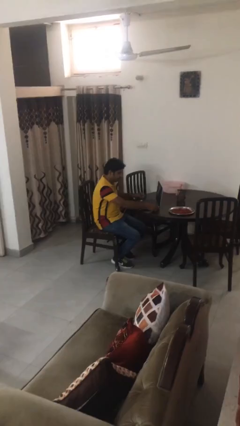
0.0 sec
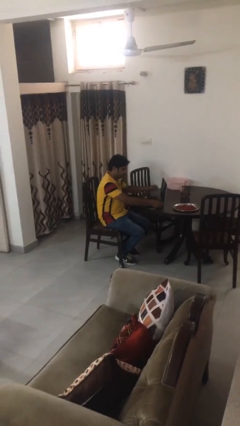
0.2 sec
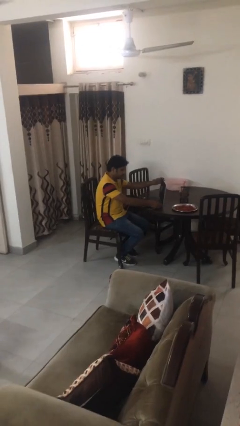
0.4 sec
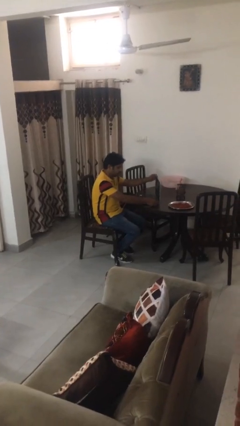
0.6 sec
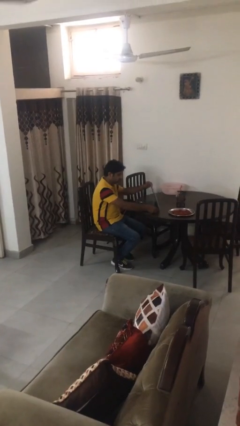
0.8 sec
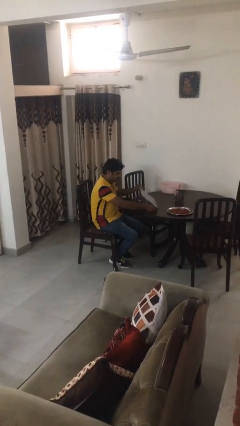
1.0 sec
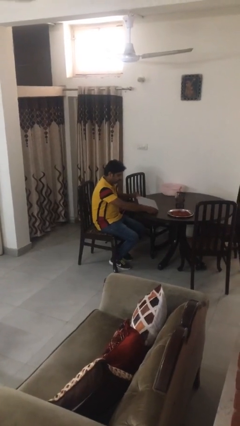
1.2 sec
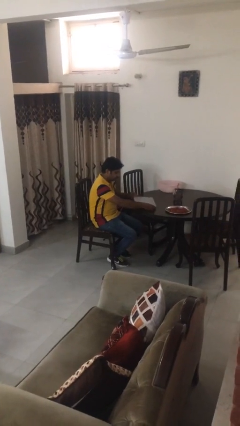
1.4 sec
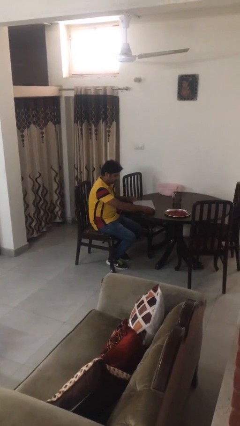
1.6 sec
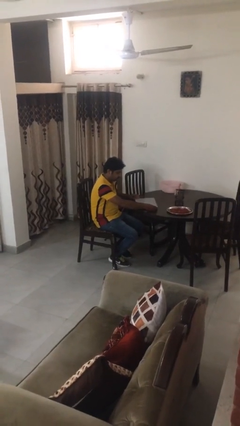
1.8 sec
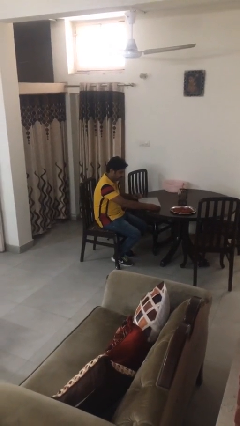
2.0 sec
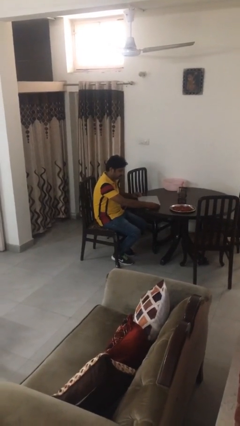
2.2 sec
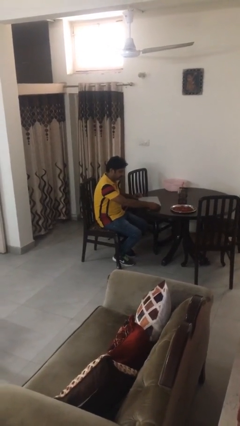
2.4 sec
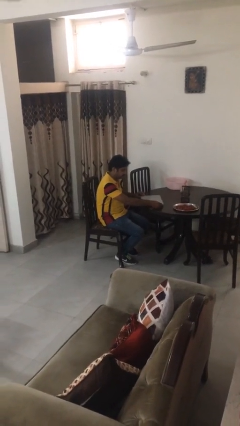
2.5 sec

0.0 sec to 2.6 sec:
person closes laptop

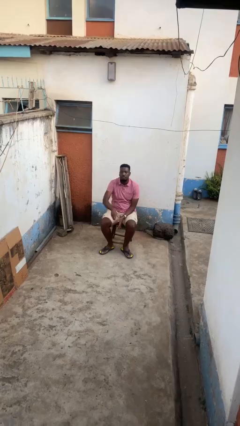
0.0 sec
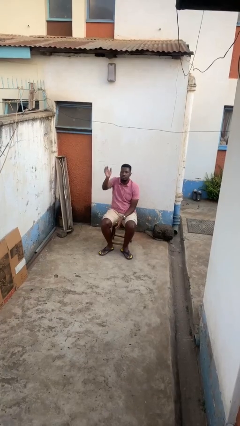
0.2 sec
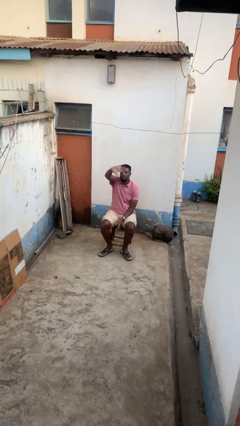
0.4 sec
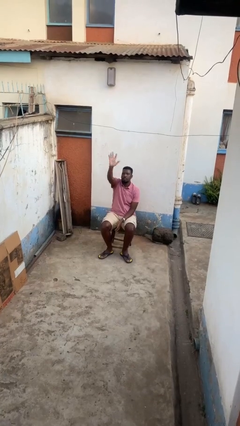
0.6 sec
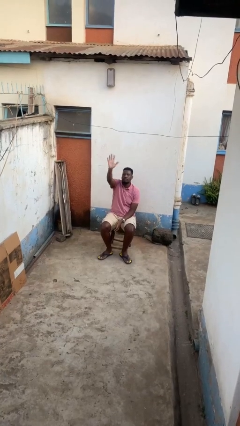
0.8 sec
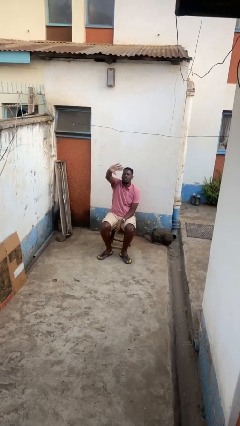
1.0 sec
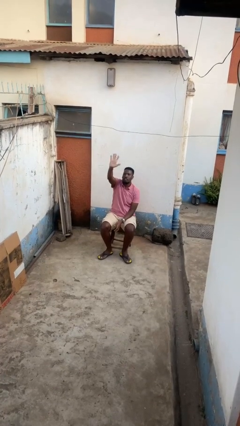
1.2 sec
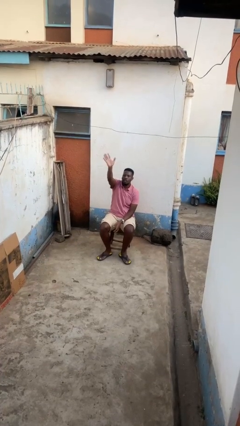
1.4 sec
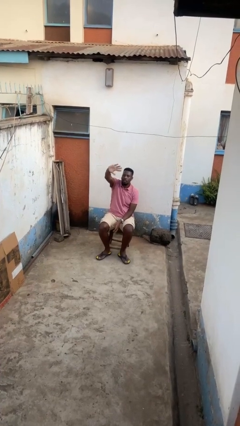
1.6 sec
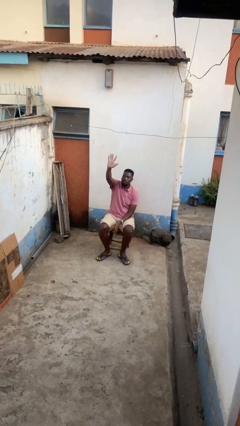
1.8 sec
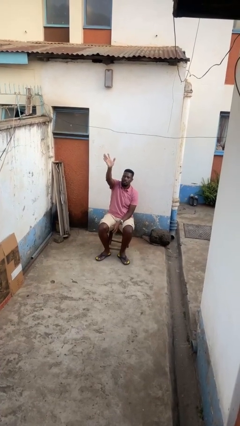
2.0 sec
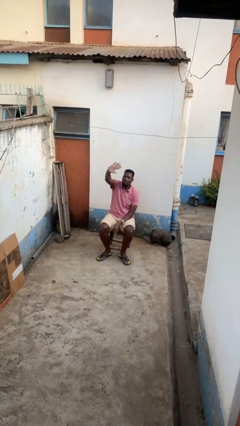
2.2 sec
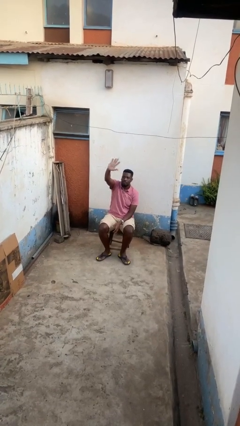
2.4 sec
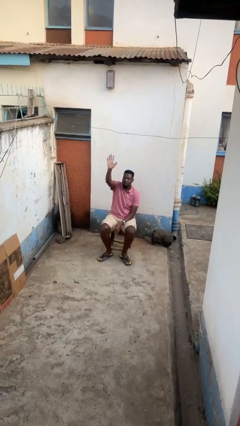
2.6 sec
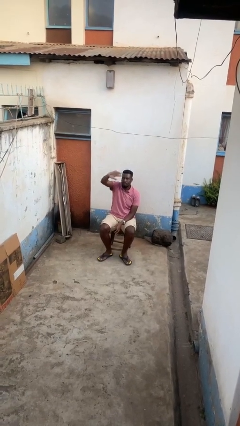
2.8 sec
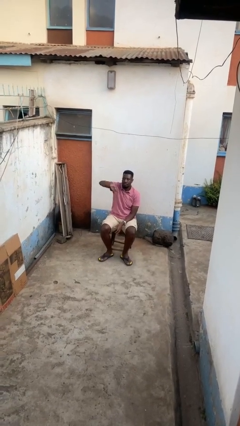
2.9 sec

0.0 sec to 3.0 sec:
person waves at person

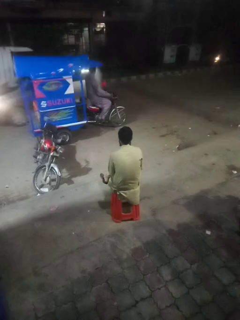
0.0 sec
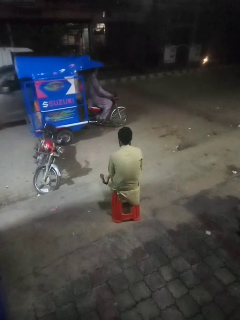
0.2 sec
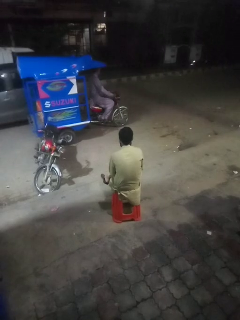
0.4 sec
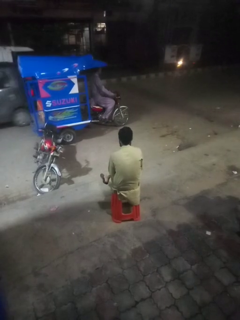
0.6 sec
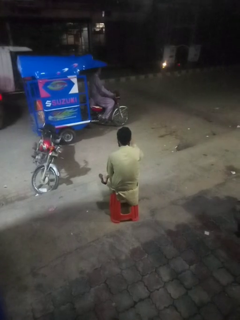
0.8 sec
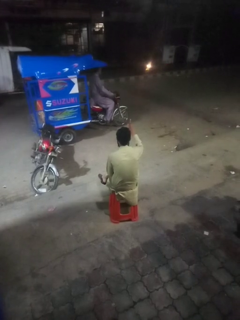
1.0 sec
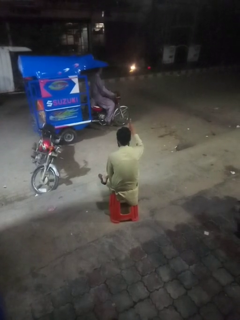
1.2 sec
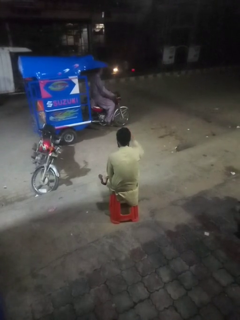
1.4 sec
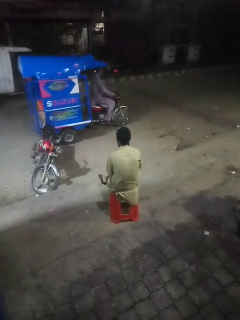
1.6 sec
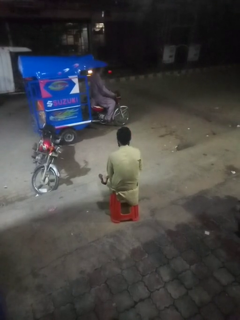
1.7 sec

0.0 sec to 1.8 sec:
person gestures number one

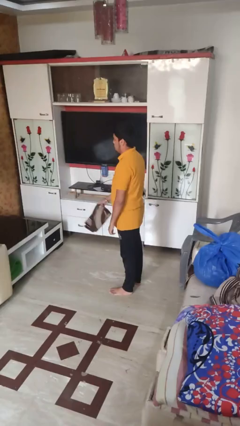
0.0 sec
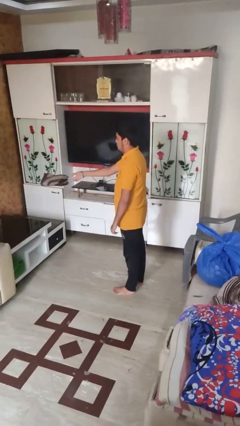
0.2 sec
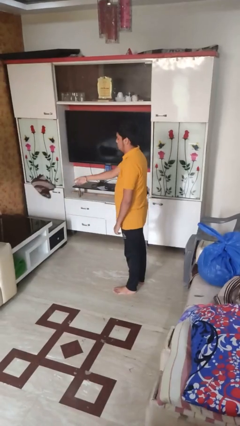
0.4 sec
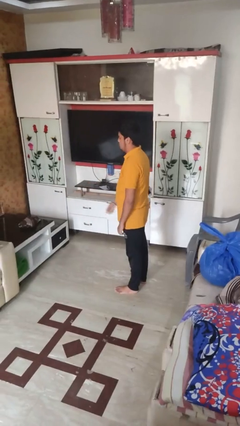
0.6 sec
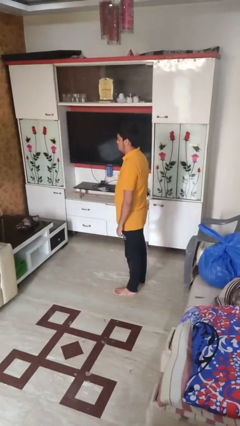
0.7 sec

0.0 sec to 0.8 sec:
person throws object on table

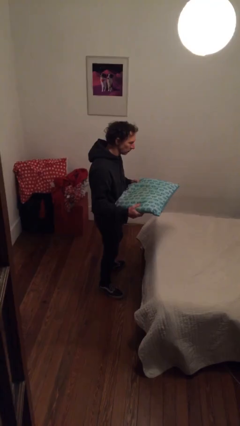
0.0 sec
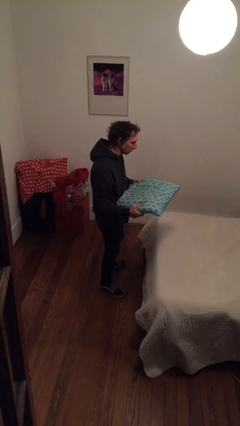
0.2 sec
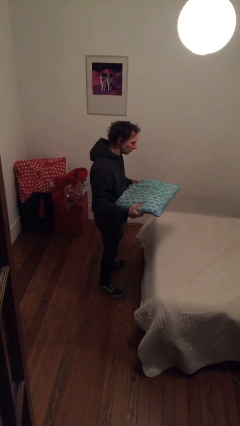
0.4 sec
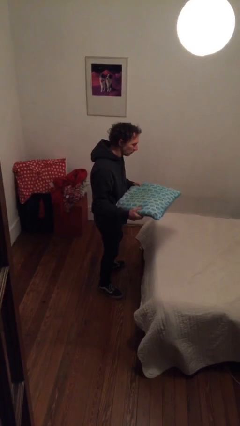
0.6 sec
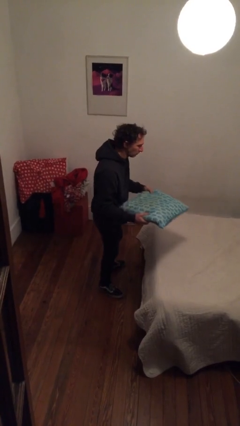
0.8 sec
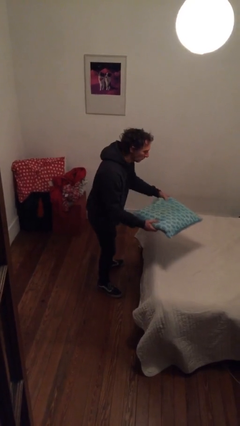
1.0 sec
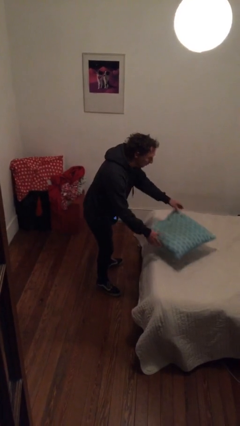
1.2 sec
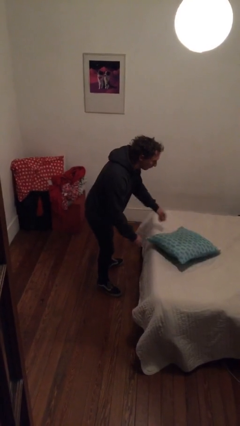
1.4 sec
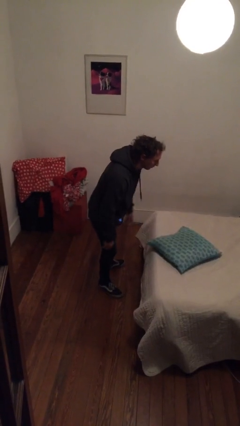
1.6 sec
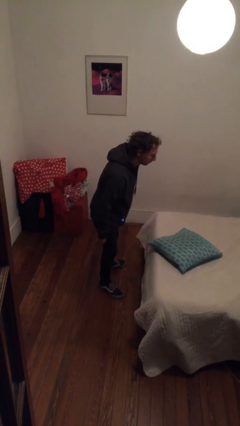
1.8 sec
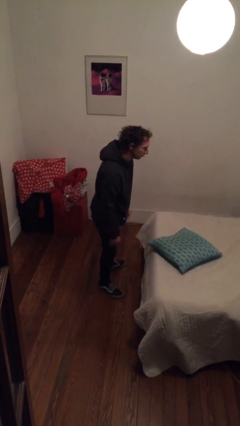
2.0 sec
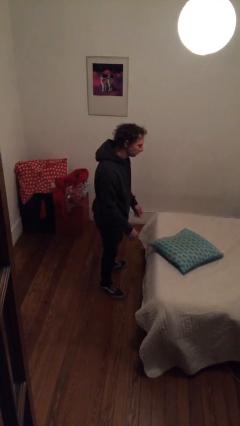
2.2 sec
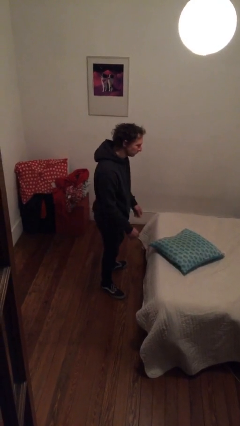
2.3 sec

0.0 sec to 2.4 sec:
person puts down object on bed

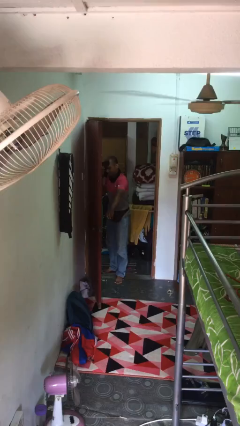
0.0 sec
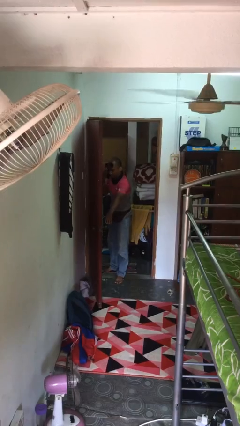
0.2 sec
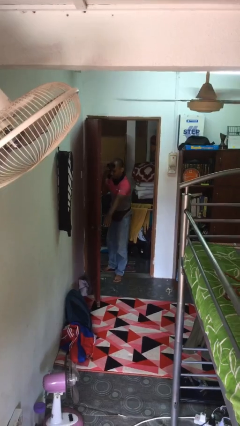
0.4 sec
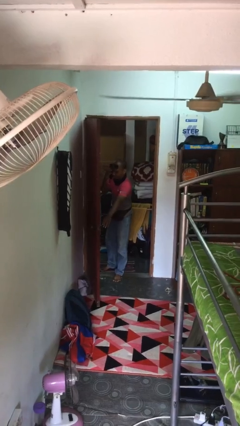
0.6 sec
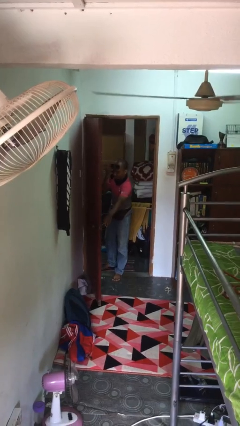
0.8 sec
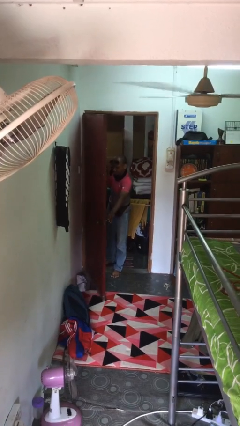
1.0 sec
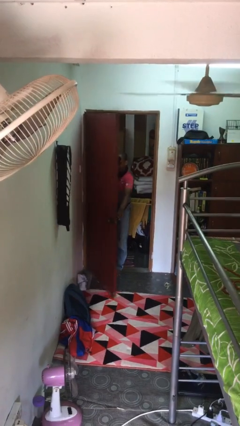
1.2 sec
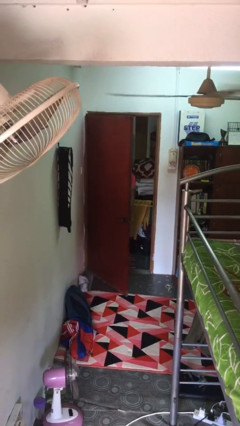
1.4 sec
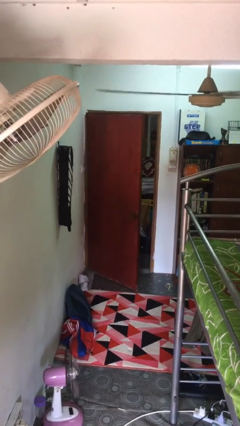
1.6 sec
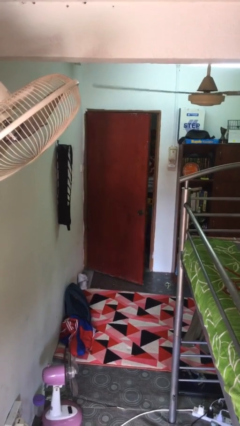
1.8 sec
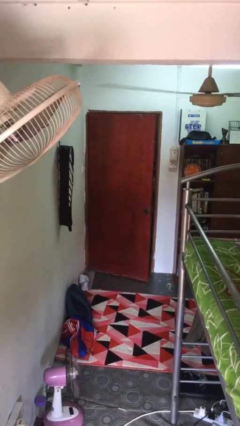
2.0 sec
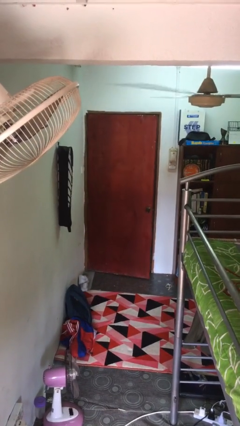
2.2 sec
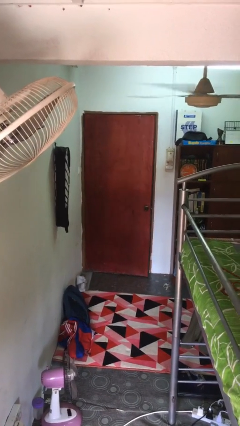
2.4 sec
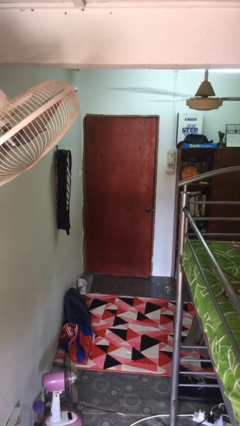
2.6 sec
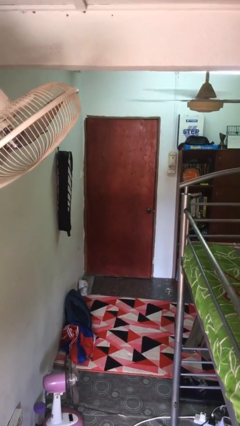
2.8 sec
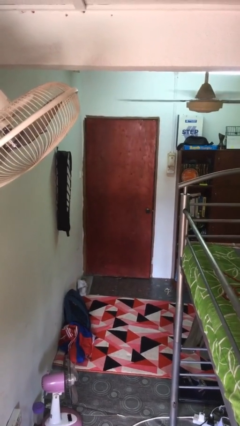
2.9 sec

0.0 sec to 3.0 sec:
person closes facility door

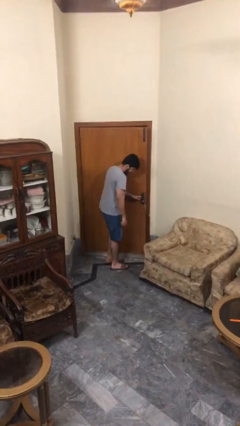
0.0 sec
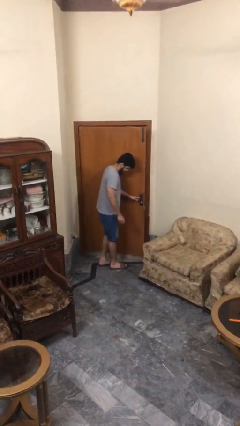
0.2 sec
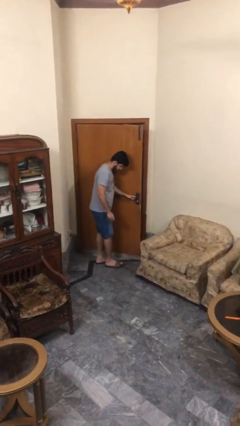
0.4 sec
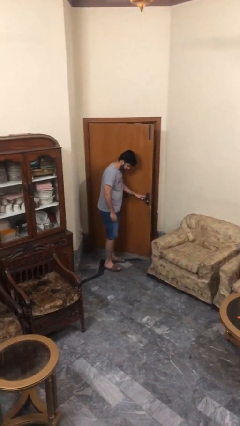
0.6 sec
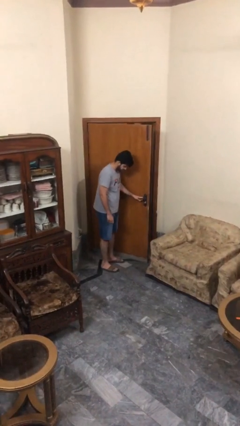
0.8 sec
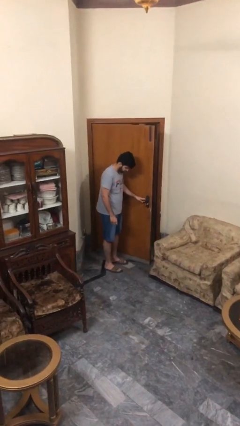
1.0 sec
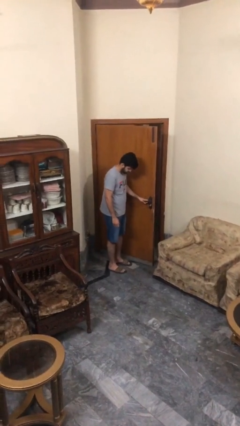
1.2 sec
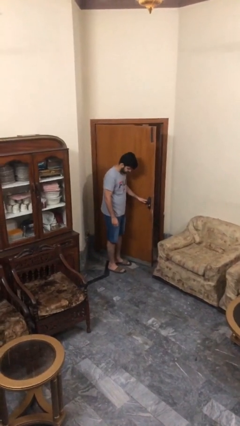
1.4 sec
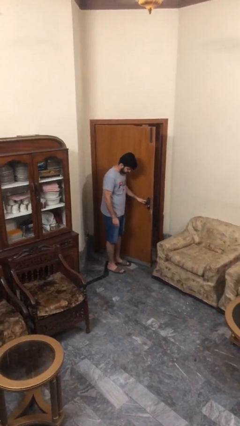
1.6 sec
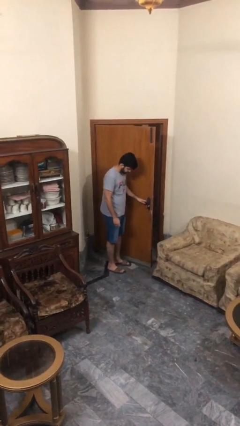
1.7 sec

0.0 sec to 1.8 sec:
person opens facility door

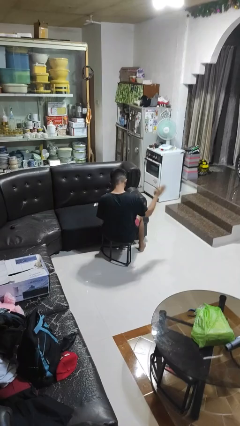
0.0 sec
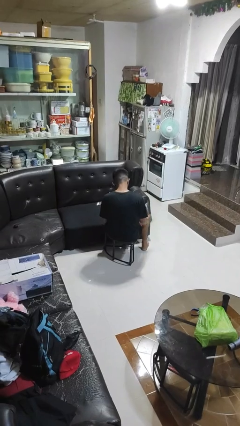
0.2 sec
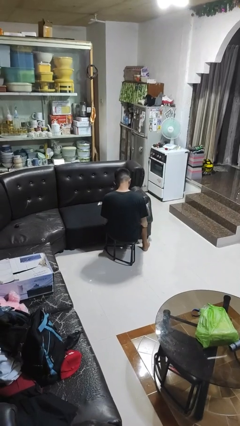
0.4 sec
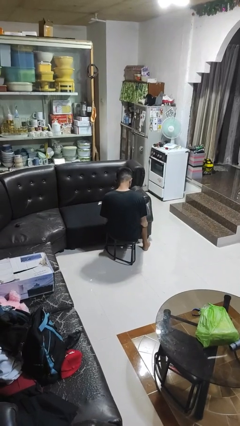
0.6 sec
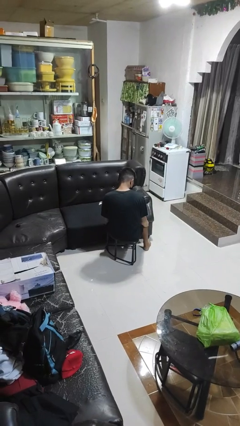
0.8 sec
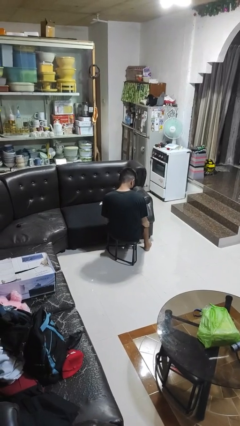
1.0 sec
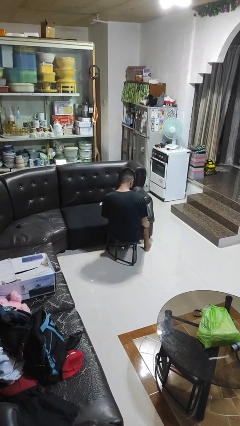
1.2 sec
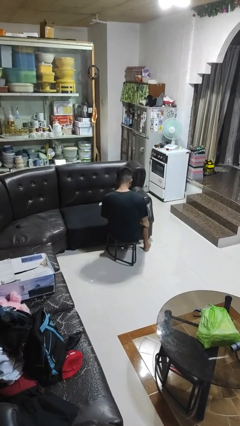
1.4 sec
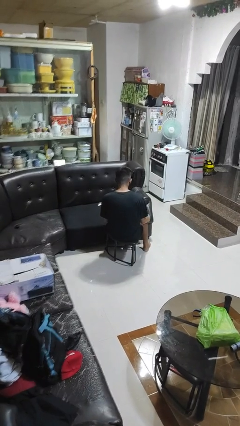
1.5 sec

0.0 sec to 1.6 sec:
person swats bug
